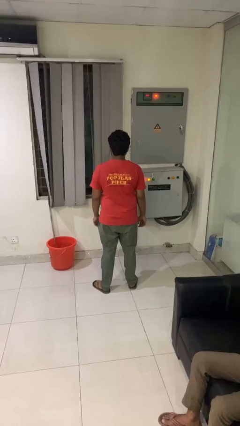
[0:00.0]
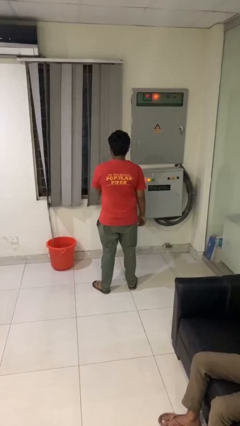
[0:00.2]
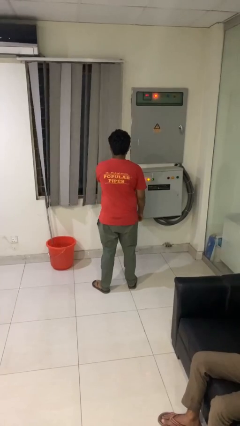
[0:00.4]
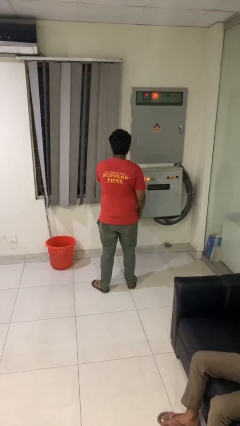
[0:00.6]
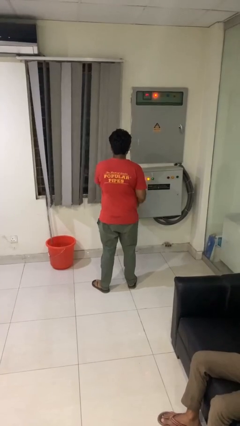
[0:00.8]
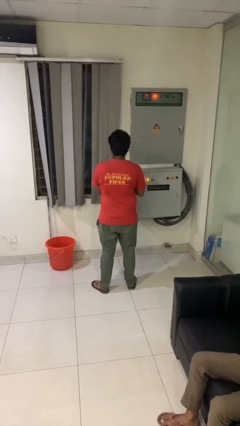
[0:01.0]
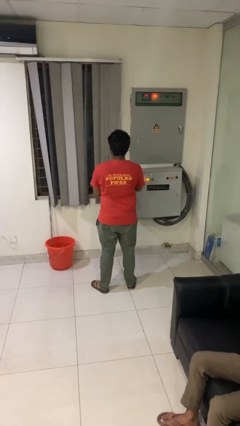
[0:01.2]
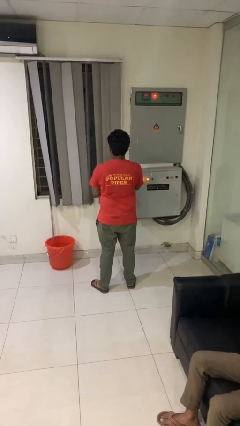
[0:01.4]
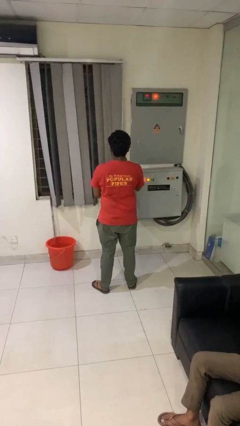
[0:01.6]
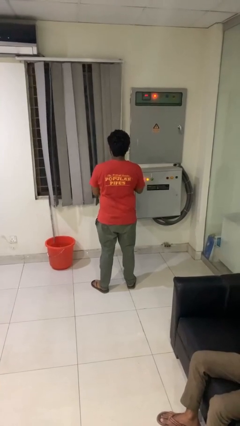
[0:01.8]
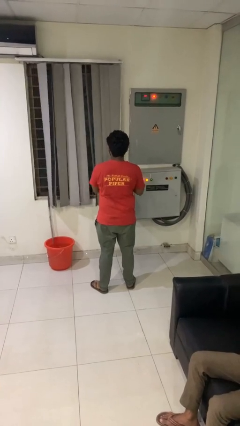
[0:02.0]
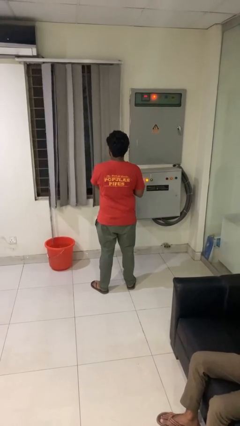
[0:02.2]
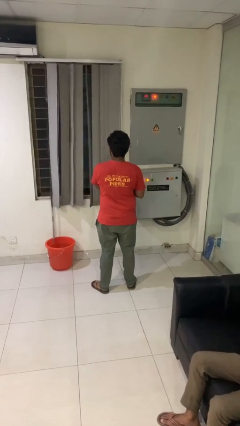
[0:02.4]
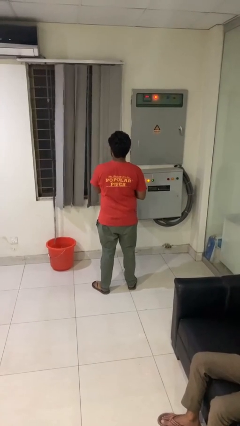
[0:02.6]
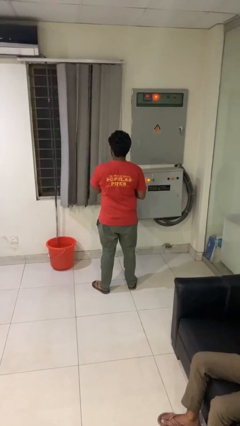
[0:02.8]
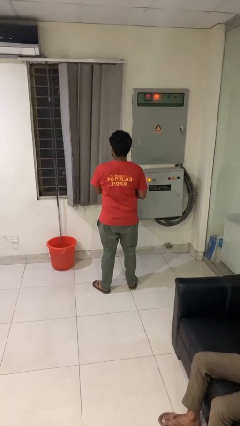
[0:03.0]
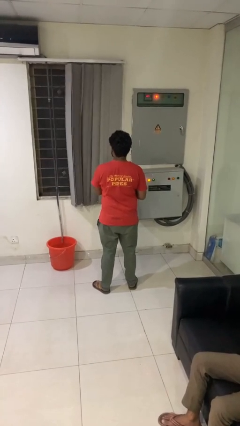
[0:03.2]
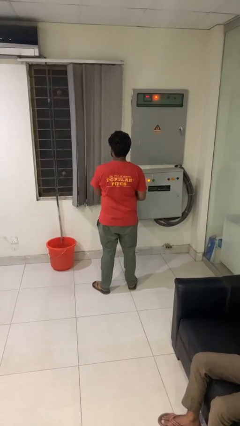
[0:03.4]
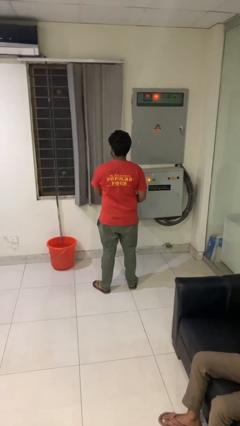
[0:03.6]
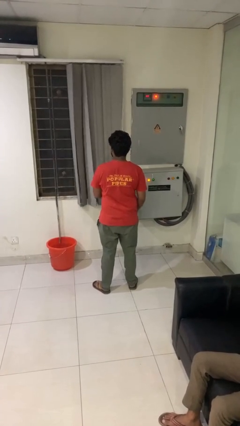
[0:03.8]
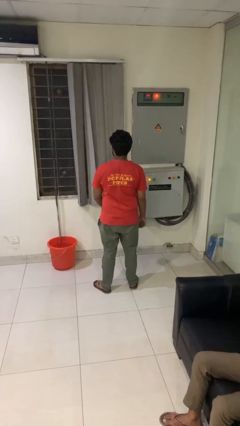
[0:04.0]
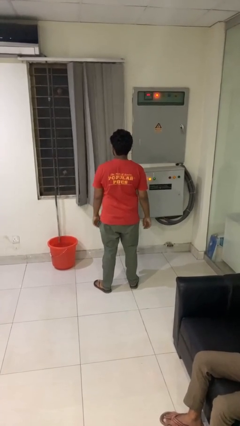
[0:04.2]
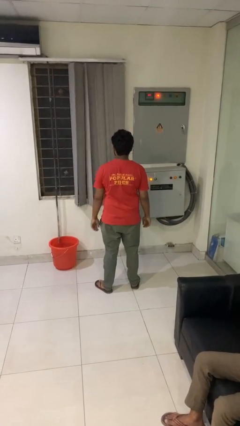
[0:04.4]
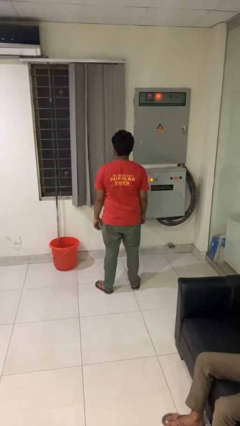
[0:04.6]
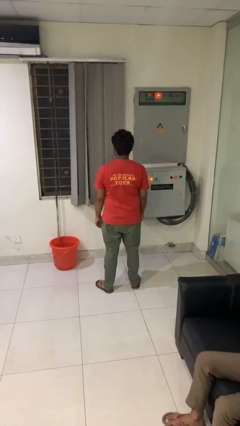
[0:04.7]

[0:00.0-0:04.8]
person opens curtains

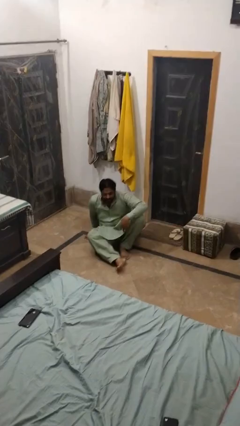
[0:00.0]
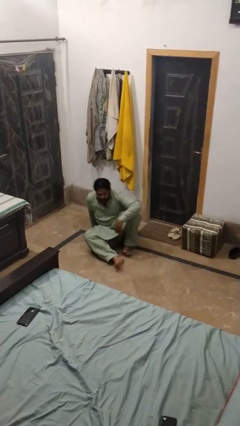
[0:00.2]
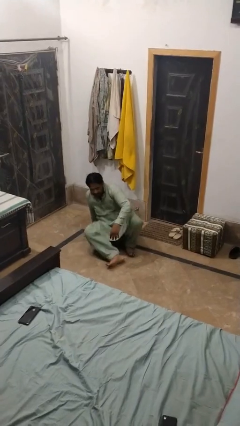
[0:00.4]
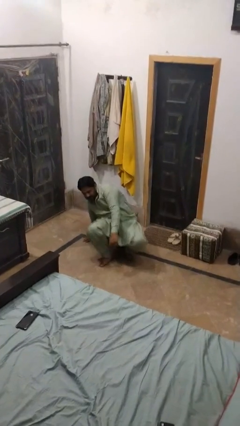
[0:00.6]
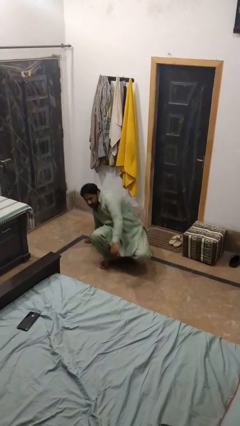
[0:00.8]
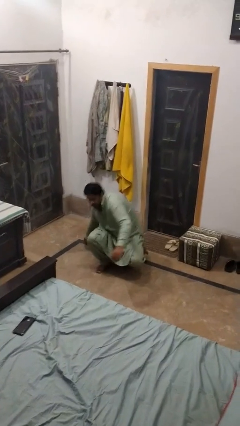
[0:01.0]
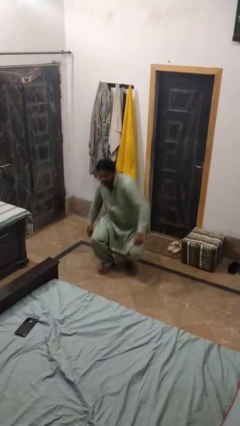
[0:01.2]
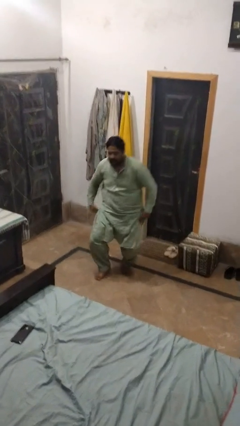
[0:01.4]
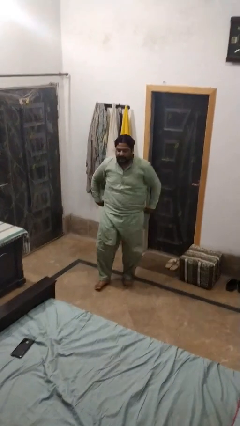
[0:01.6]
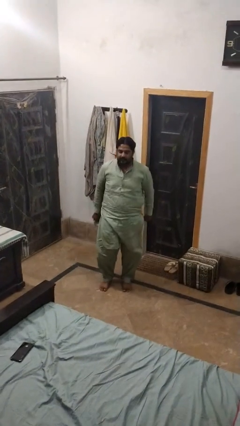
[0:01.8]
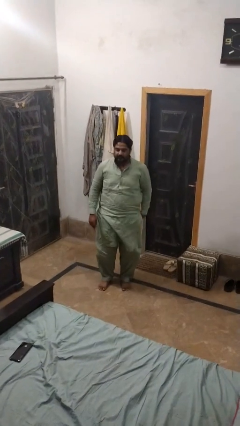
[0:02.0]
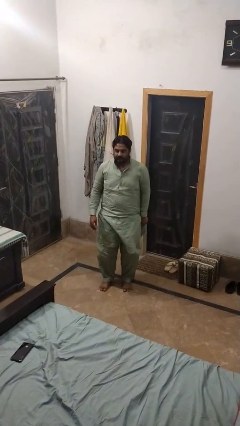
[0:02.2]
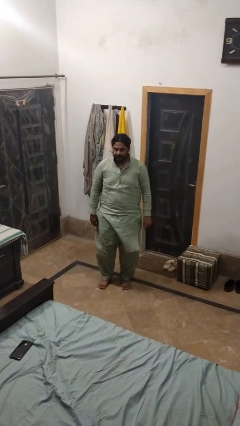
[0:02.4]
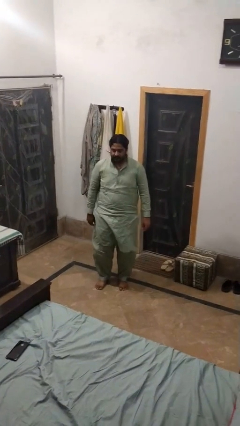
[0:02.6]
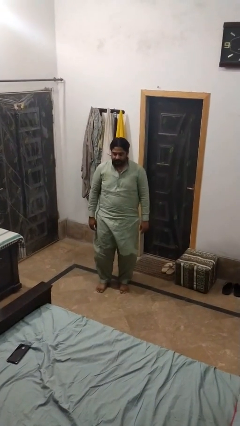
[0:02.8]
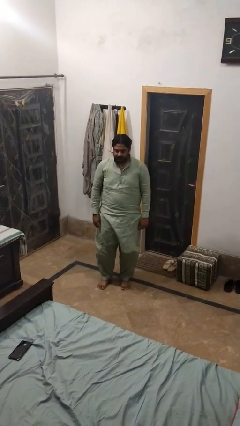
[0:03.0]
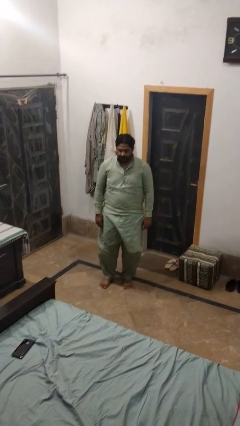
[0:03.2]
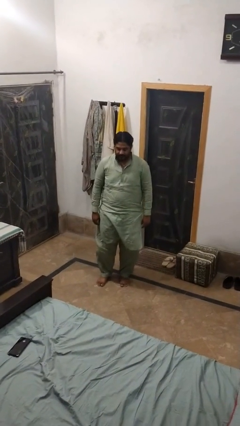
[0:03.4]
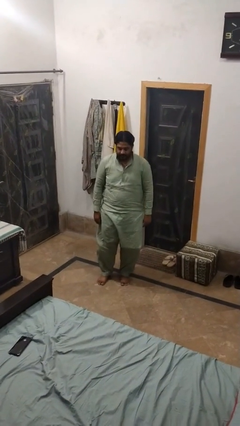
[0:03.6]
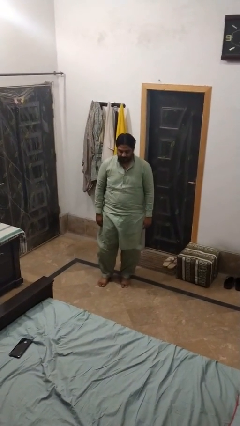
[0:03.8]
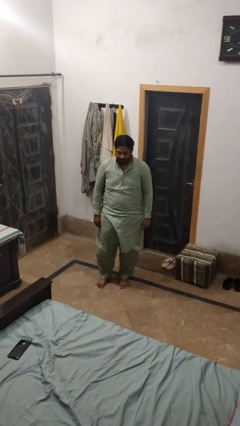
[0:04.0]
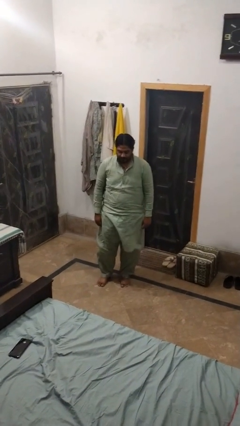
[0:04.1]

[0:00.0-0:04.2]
person stands up from floor

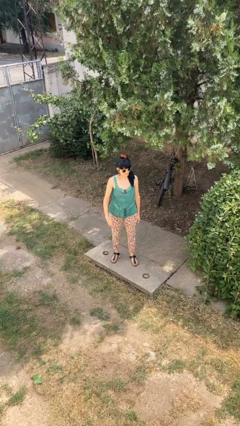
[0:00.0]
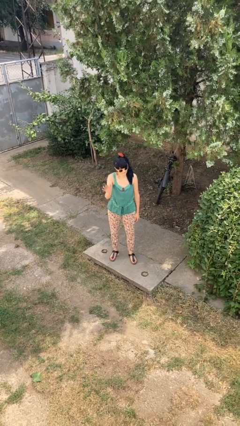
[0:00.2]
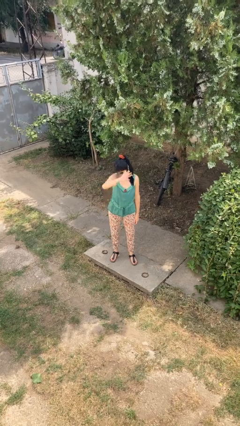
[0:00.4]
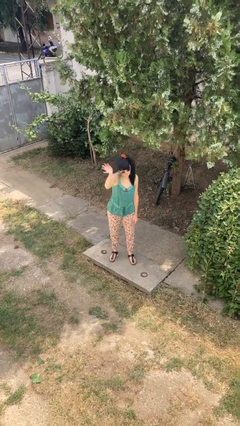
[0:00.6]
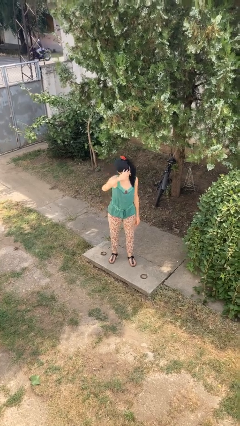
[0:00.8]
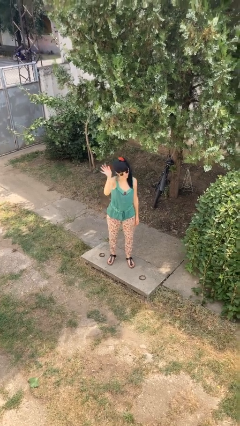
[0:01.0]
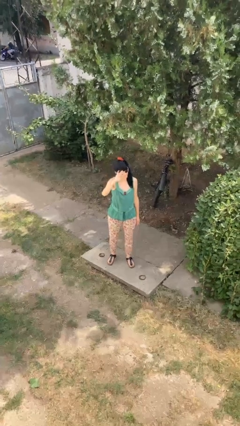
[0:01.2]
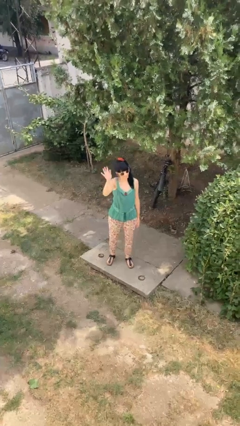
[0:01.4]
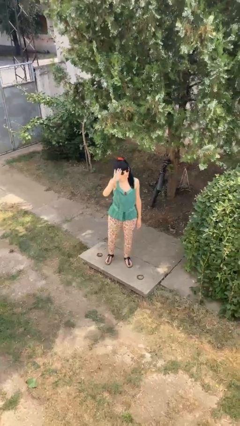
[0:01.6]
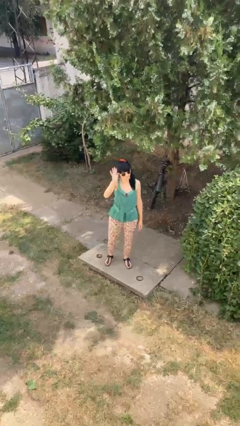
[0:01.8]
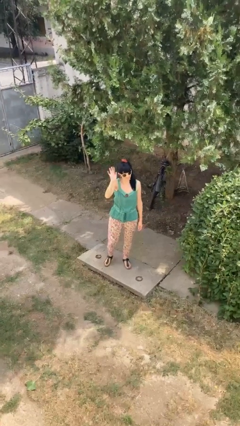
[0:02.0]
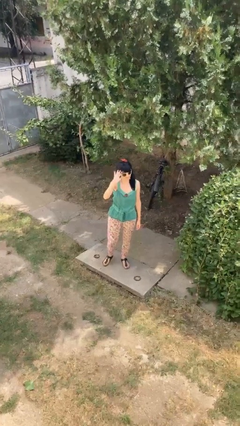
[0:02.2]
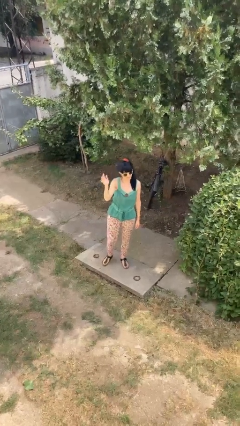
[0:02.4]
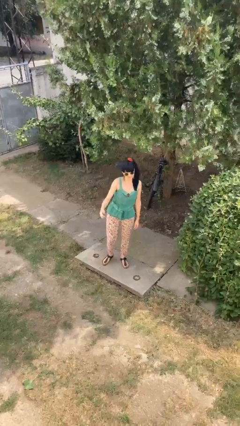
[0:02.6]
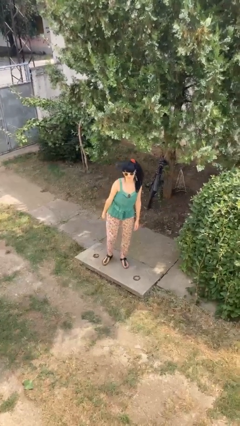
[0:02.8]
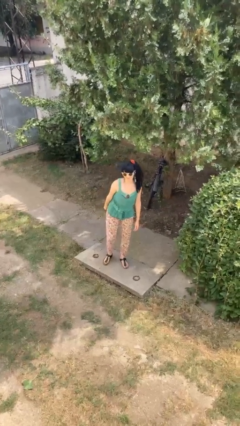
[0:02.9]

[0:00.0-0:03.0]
person waves at person

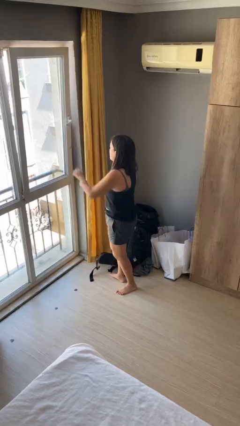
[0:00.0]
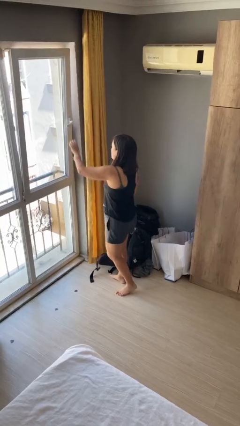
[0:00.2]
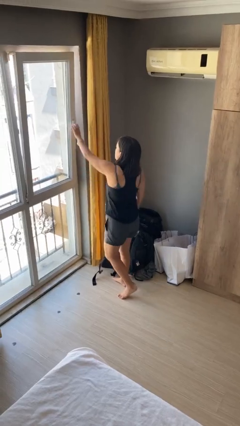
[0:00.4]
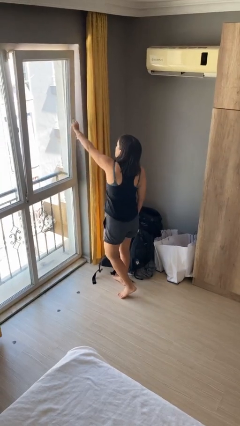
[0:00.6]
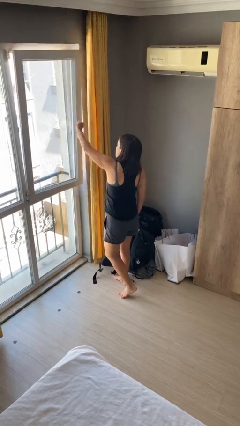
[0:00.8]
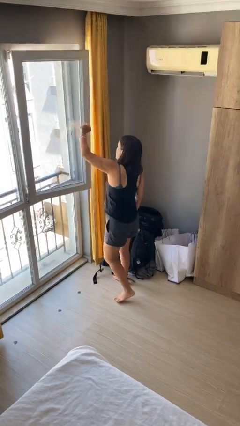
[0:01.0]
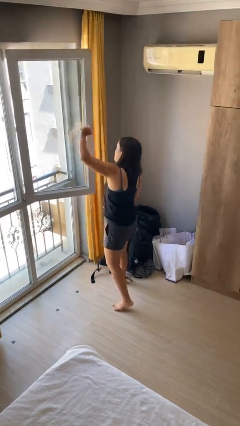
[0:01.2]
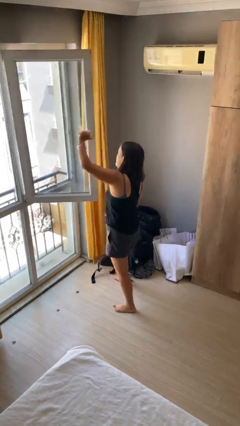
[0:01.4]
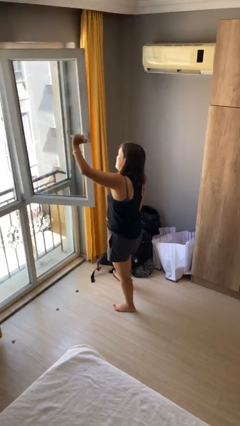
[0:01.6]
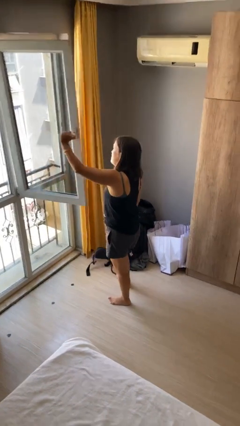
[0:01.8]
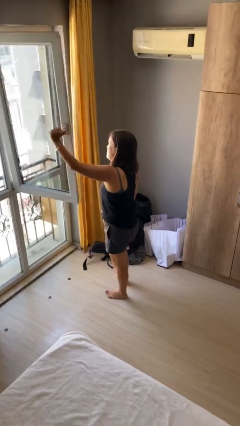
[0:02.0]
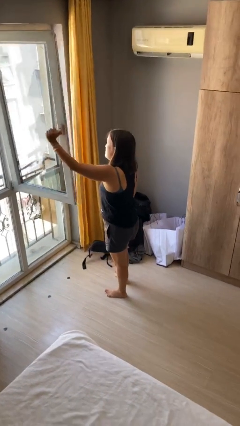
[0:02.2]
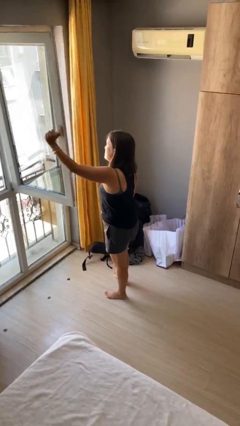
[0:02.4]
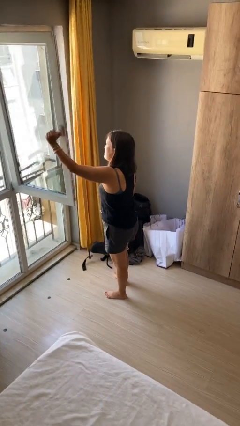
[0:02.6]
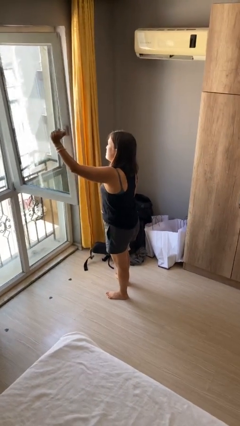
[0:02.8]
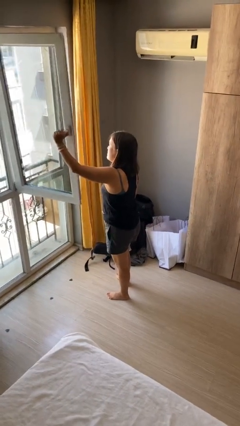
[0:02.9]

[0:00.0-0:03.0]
person opens home window

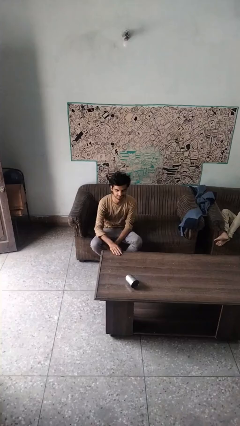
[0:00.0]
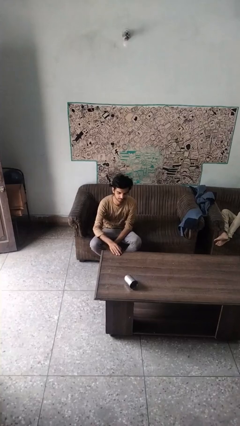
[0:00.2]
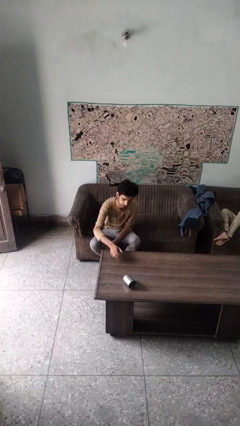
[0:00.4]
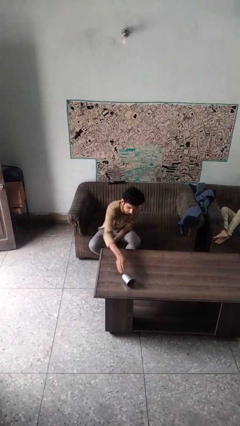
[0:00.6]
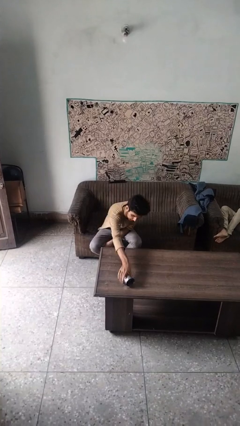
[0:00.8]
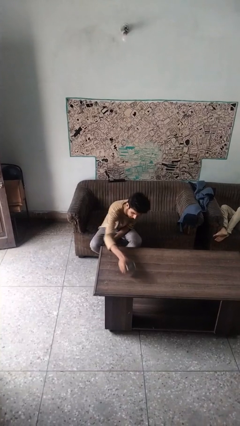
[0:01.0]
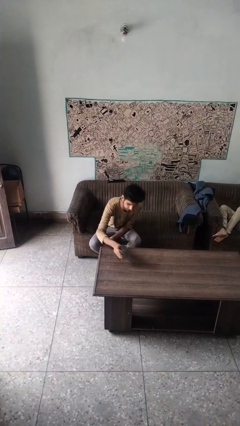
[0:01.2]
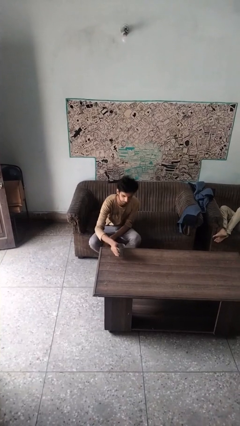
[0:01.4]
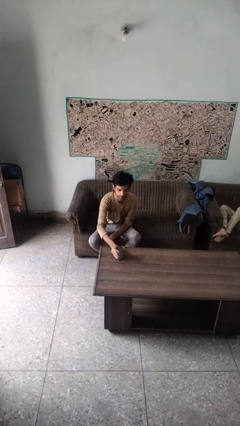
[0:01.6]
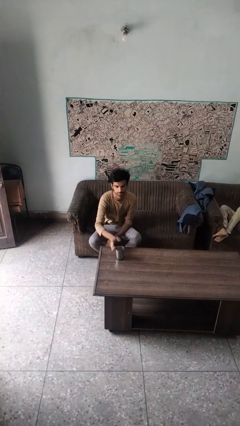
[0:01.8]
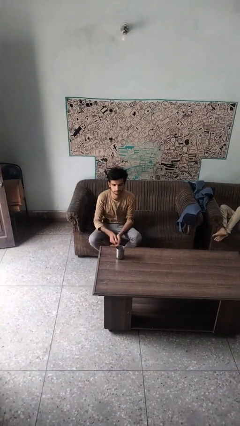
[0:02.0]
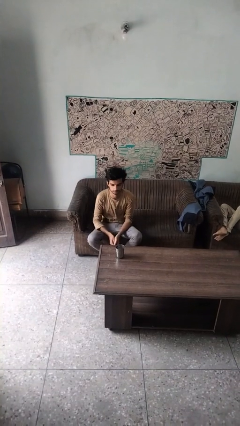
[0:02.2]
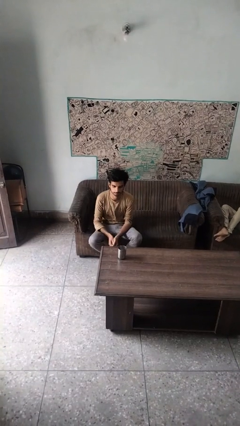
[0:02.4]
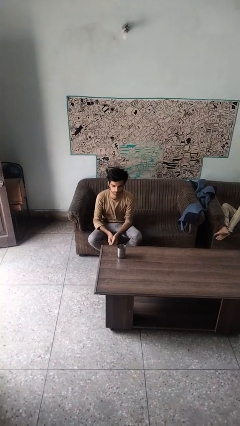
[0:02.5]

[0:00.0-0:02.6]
person sets upright glass
